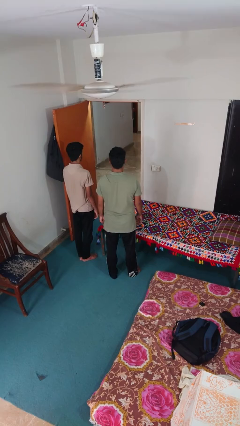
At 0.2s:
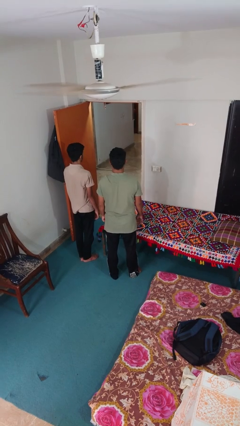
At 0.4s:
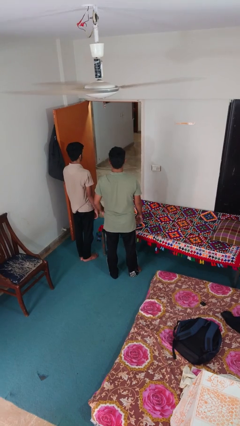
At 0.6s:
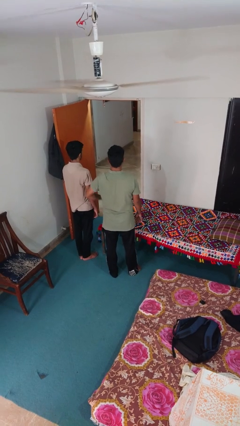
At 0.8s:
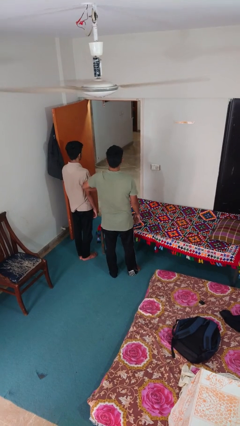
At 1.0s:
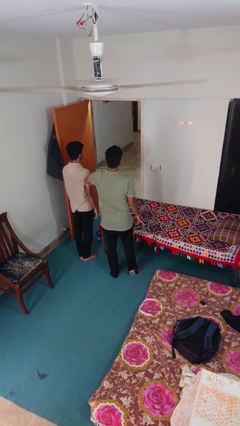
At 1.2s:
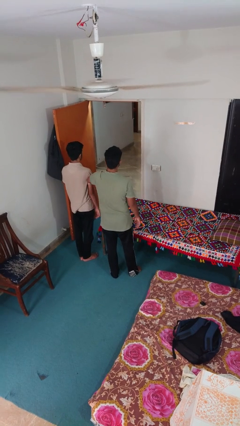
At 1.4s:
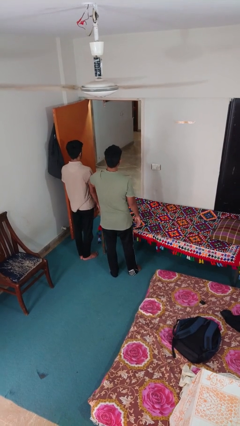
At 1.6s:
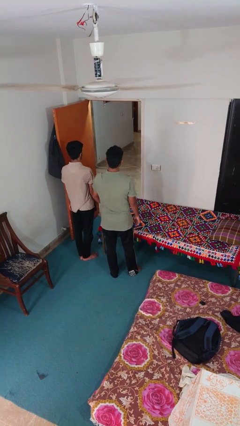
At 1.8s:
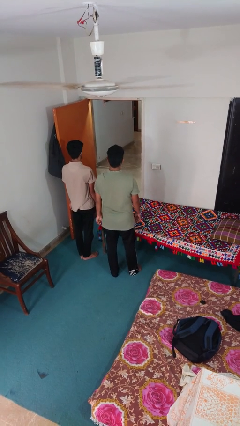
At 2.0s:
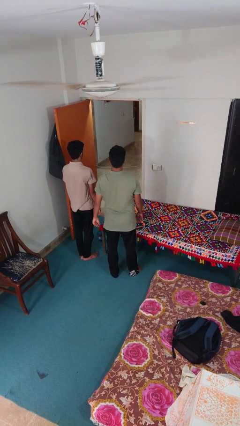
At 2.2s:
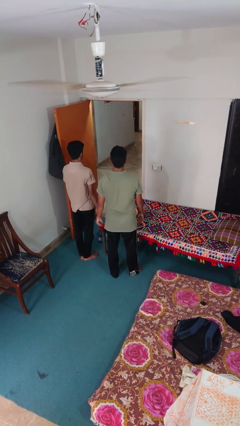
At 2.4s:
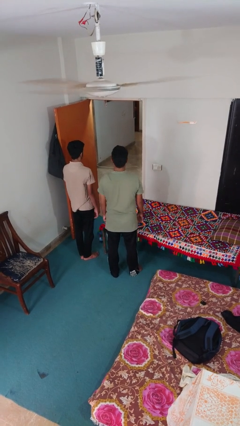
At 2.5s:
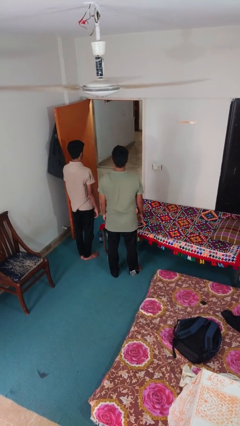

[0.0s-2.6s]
person nudges person with elbow

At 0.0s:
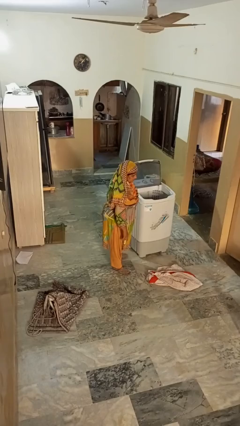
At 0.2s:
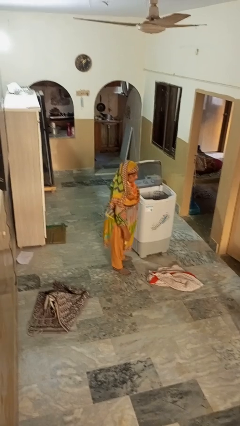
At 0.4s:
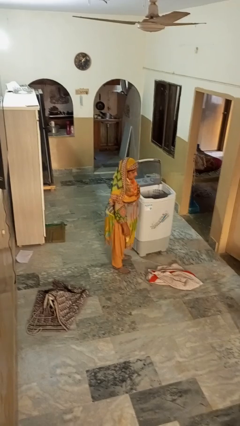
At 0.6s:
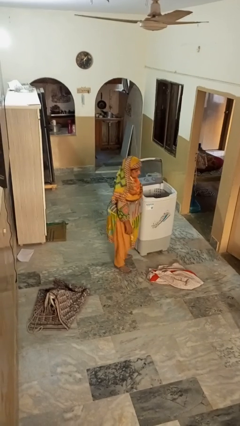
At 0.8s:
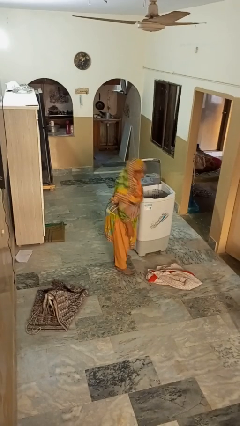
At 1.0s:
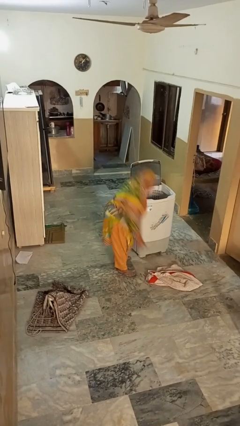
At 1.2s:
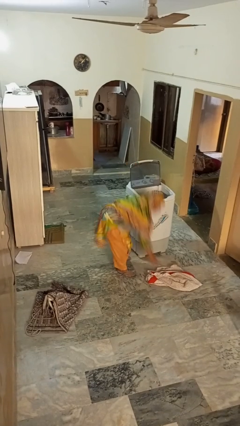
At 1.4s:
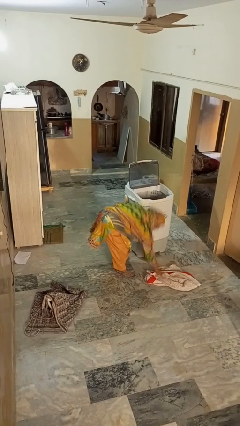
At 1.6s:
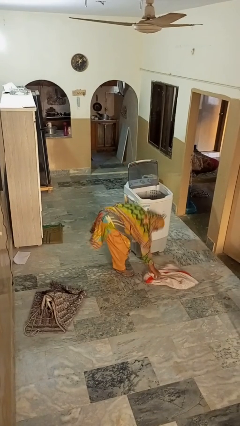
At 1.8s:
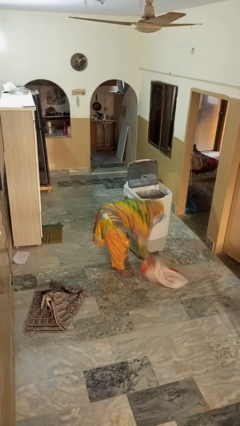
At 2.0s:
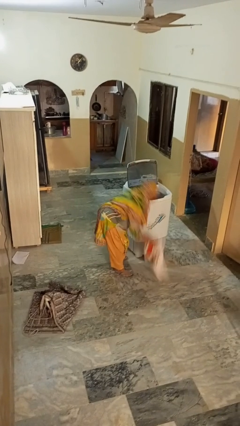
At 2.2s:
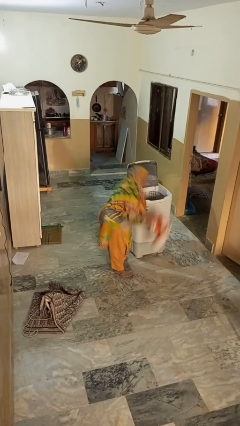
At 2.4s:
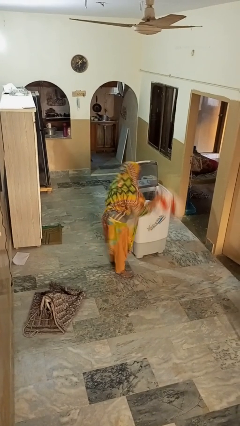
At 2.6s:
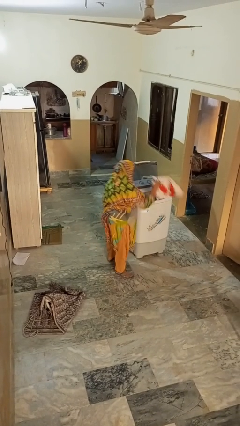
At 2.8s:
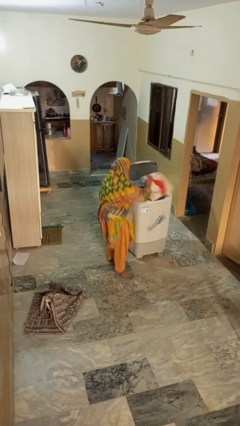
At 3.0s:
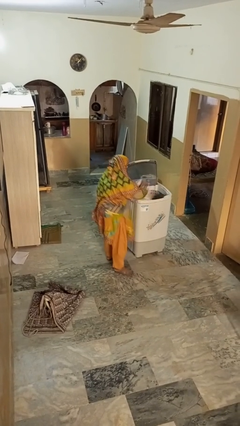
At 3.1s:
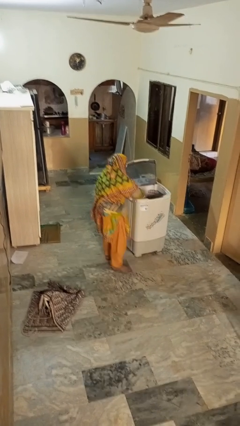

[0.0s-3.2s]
person loads clotheswasher

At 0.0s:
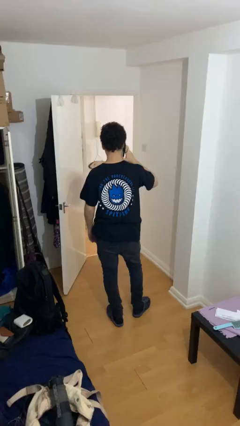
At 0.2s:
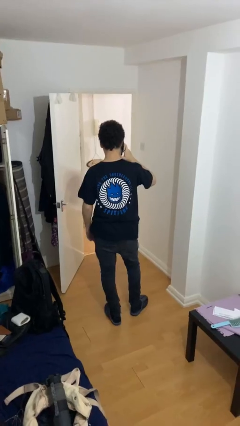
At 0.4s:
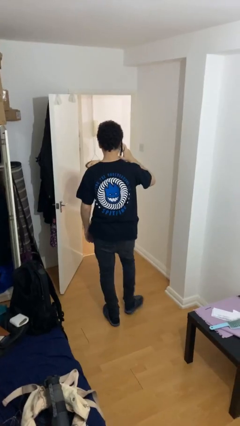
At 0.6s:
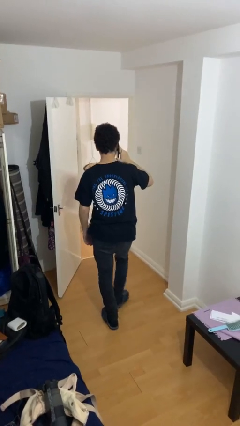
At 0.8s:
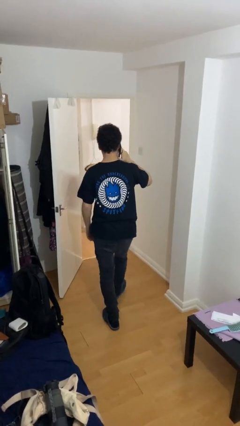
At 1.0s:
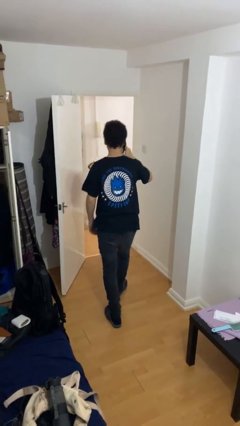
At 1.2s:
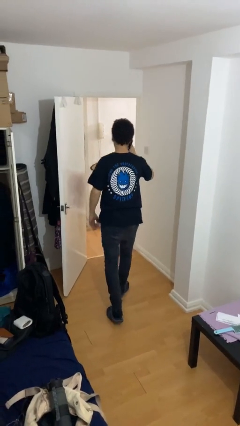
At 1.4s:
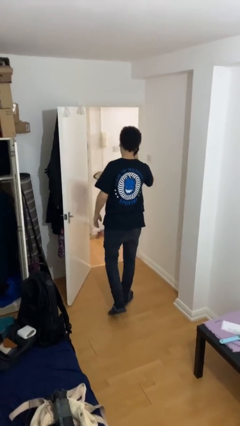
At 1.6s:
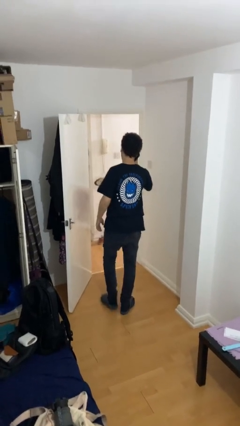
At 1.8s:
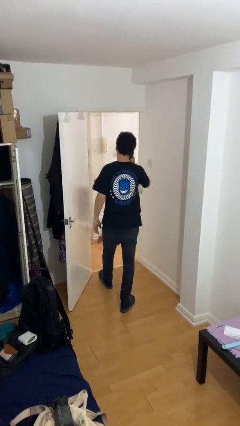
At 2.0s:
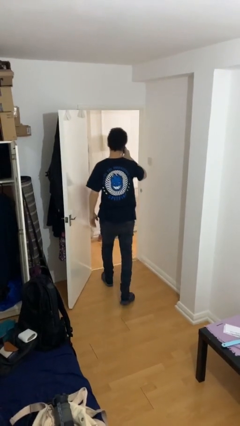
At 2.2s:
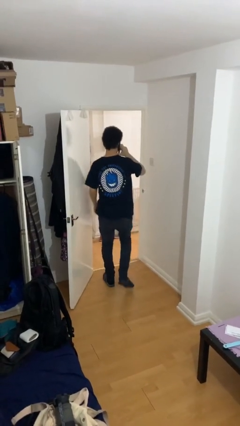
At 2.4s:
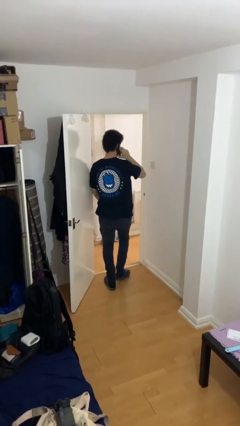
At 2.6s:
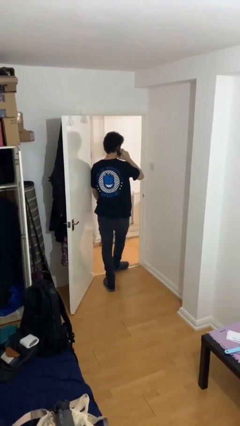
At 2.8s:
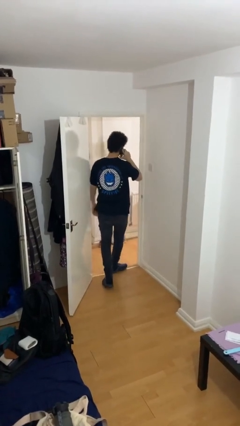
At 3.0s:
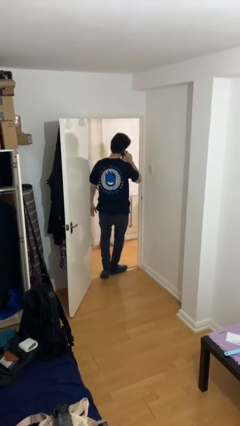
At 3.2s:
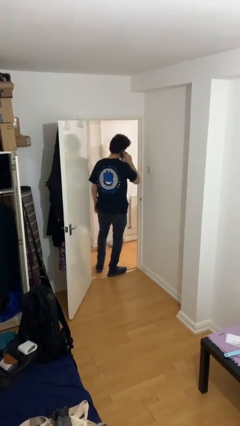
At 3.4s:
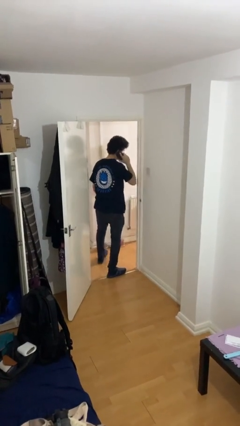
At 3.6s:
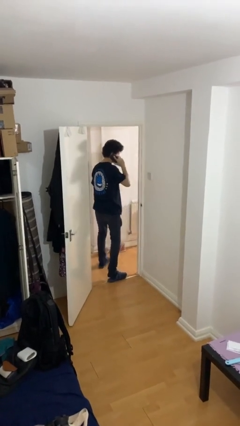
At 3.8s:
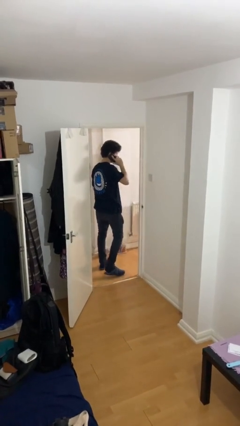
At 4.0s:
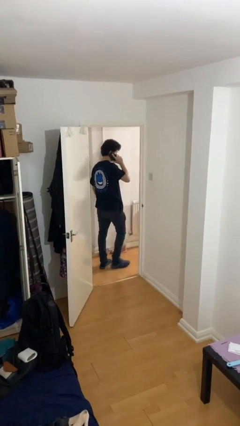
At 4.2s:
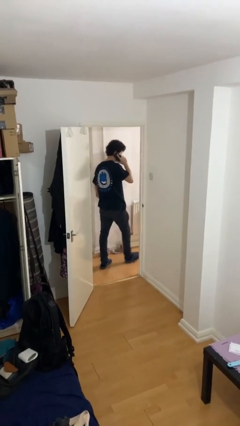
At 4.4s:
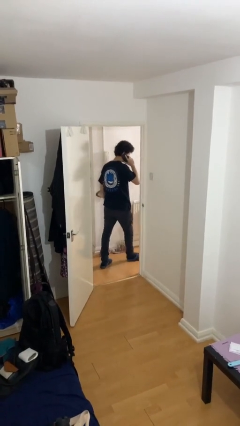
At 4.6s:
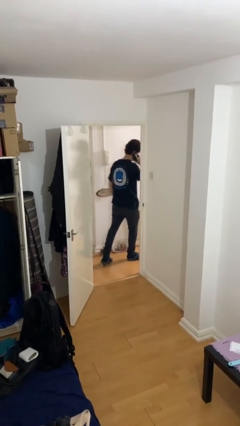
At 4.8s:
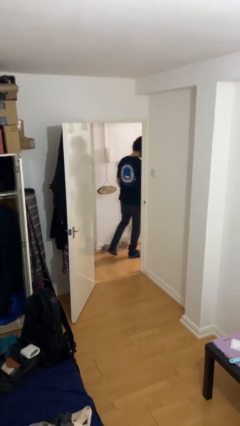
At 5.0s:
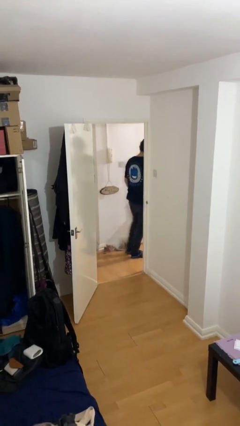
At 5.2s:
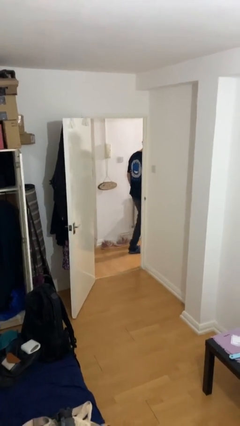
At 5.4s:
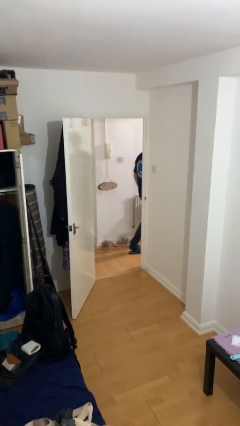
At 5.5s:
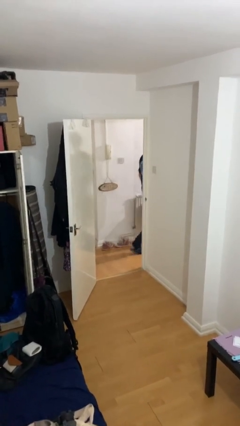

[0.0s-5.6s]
person exits scene through structure

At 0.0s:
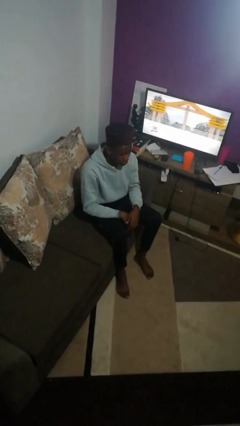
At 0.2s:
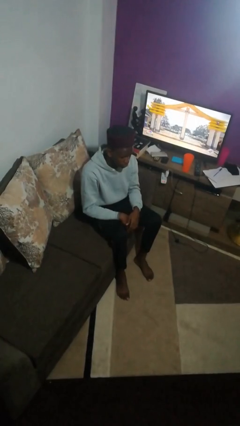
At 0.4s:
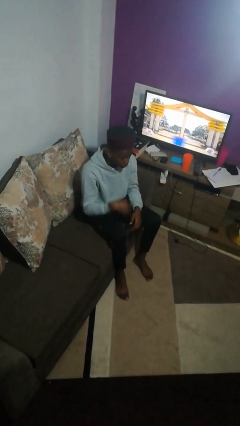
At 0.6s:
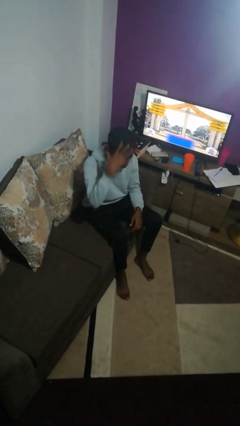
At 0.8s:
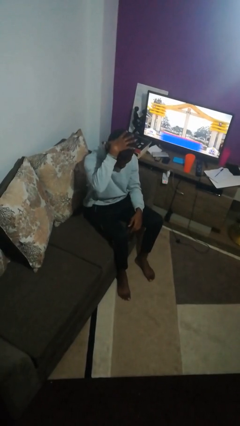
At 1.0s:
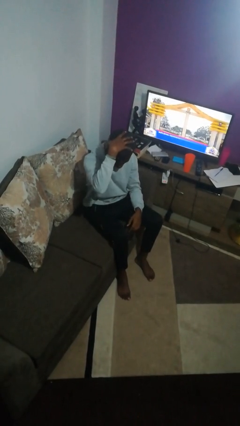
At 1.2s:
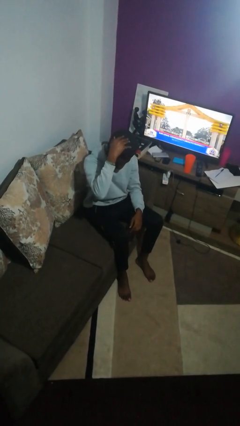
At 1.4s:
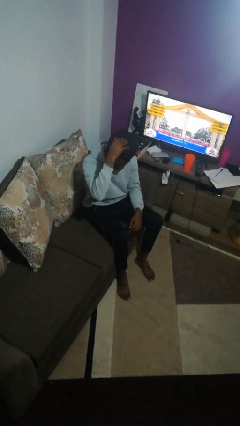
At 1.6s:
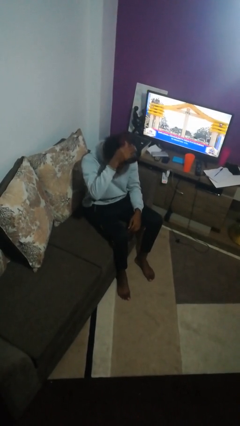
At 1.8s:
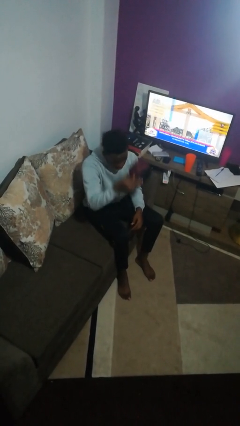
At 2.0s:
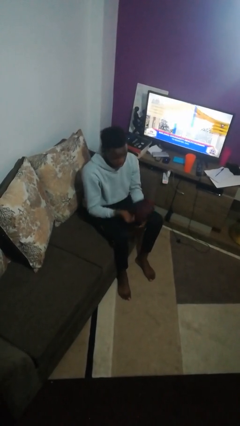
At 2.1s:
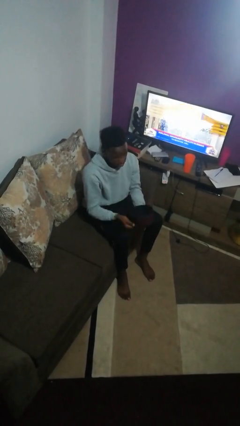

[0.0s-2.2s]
person takes off hat

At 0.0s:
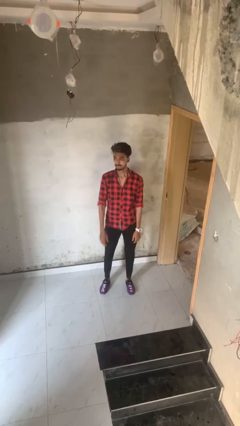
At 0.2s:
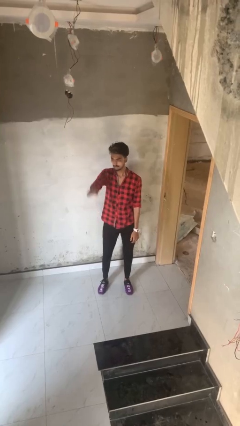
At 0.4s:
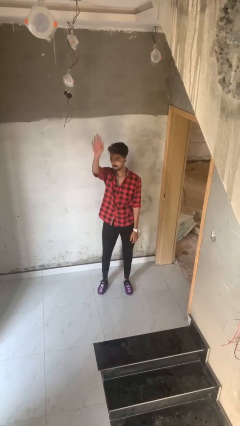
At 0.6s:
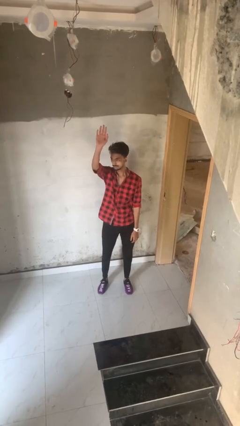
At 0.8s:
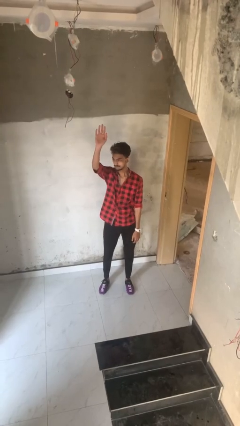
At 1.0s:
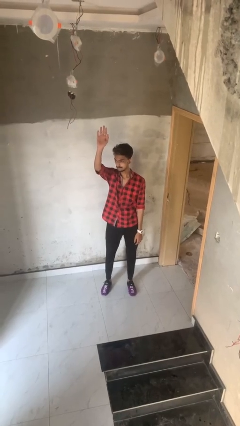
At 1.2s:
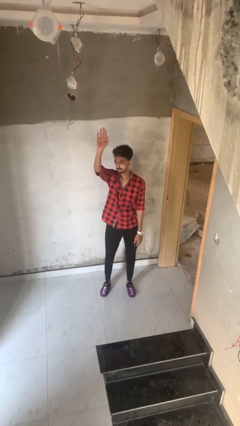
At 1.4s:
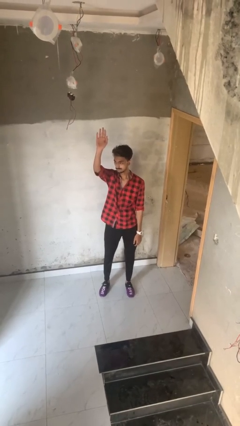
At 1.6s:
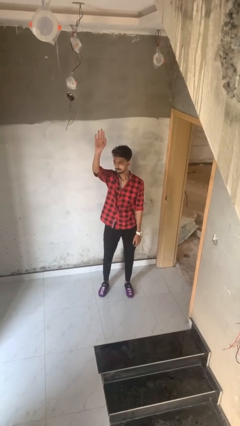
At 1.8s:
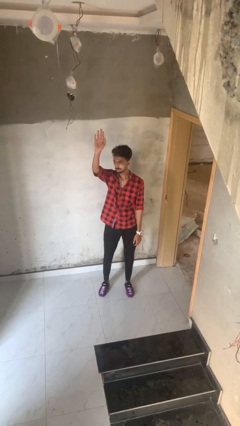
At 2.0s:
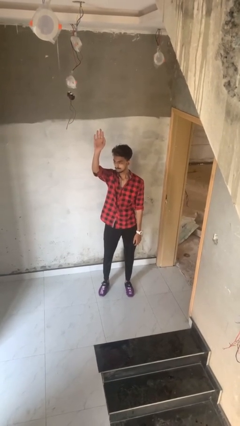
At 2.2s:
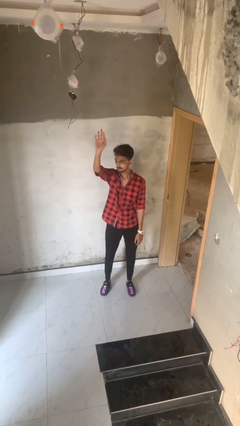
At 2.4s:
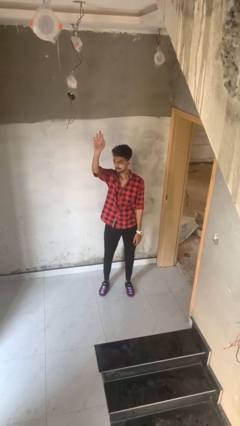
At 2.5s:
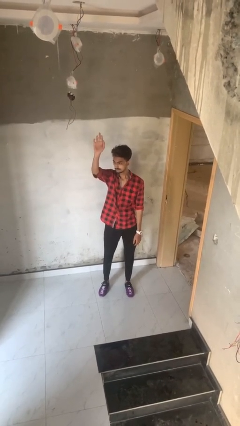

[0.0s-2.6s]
person gestures raise hand

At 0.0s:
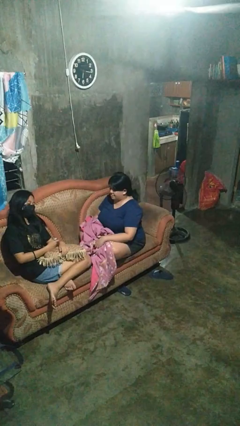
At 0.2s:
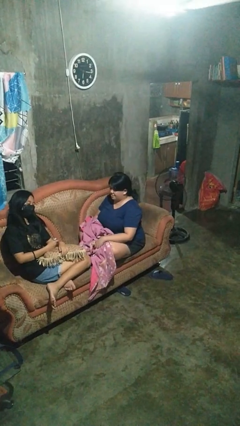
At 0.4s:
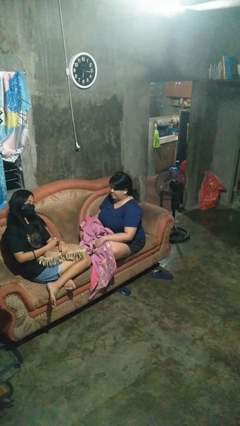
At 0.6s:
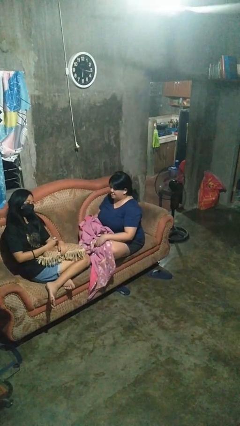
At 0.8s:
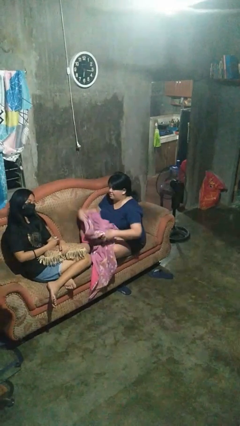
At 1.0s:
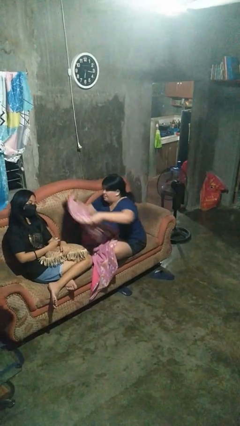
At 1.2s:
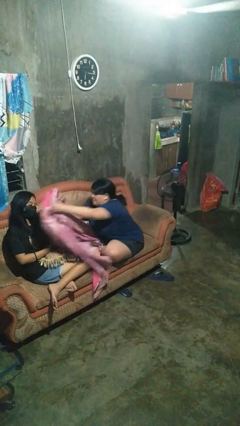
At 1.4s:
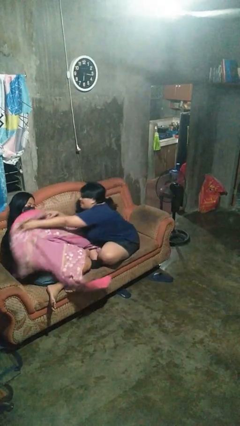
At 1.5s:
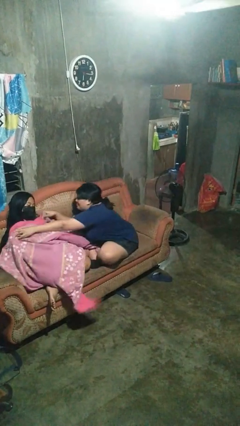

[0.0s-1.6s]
person covers friend with blanket
